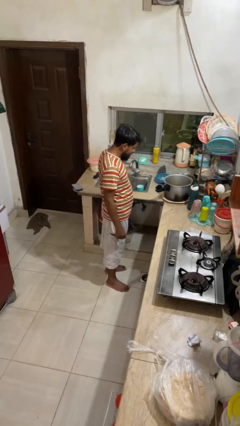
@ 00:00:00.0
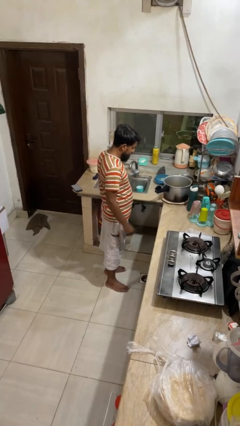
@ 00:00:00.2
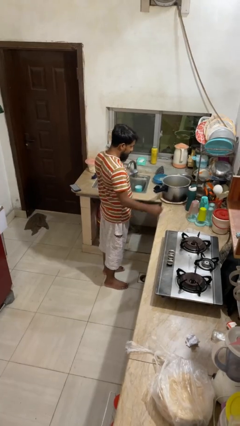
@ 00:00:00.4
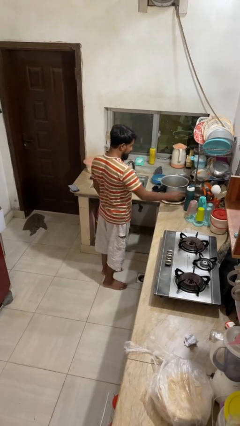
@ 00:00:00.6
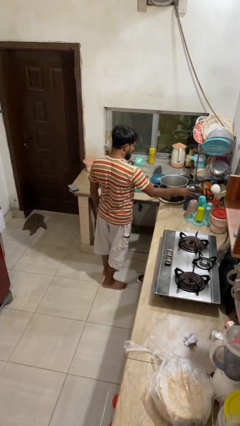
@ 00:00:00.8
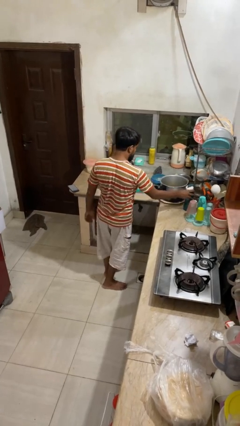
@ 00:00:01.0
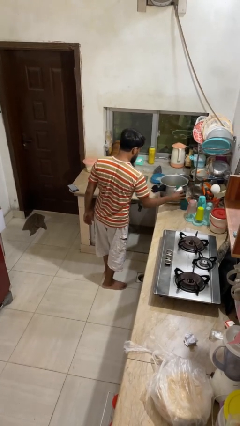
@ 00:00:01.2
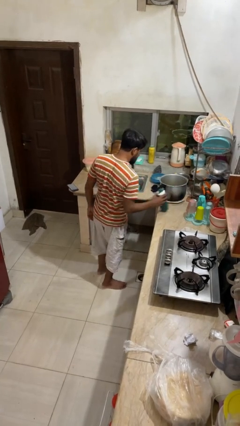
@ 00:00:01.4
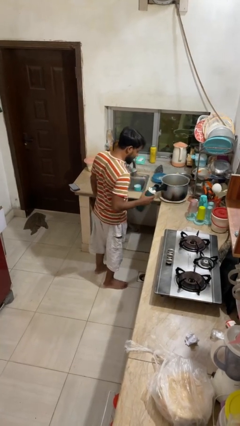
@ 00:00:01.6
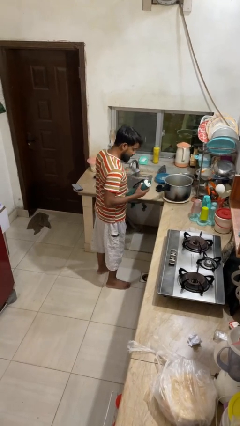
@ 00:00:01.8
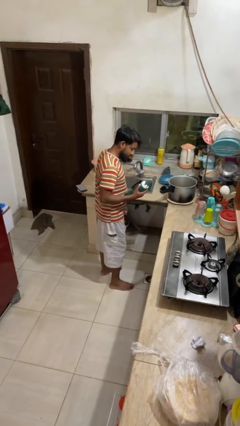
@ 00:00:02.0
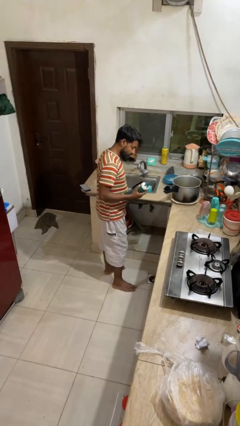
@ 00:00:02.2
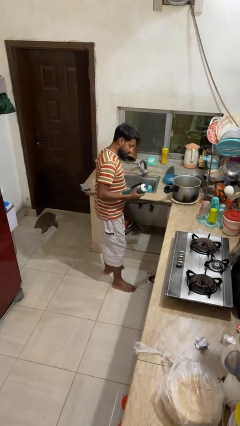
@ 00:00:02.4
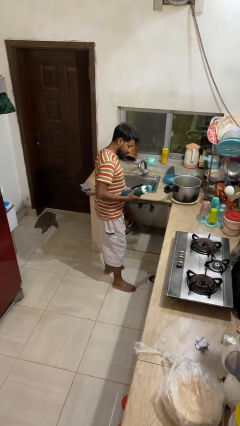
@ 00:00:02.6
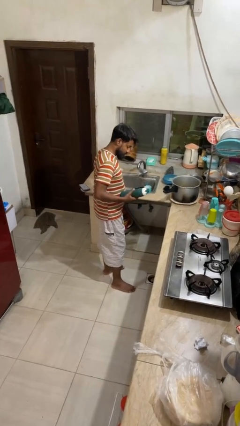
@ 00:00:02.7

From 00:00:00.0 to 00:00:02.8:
person picks up object from countertop

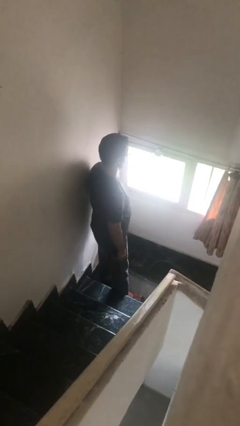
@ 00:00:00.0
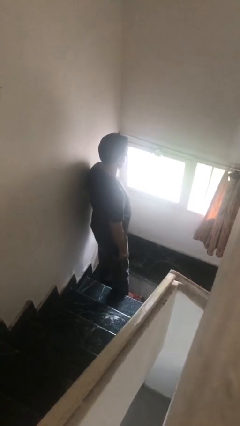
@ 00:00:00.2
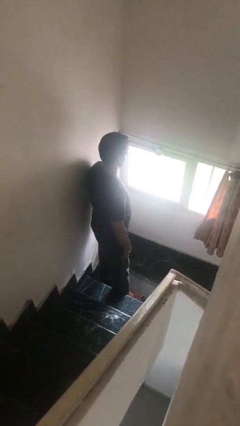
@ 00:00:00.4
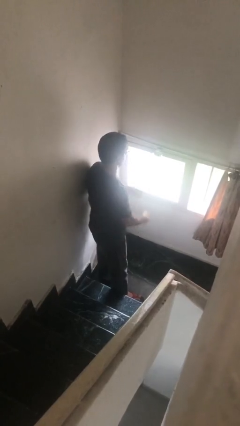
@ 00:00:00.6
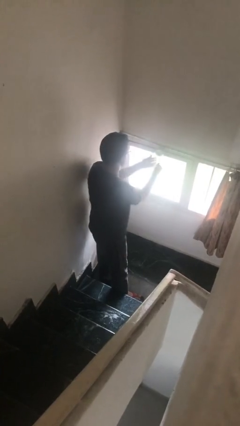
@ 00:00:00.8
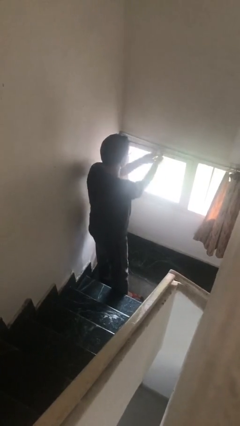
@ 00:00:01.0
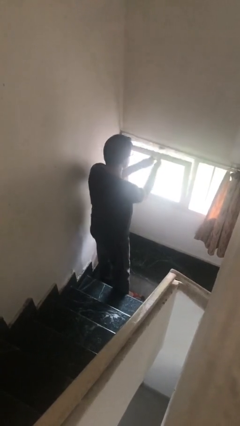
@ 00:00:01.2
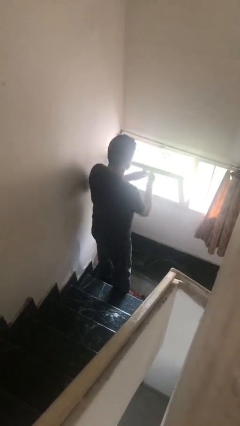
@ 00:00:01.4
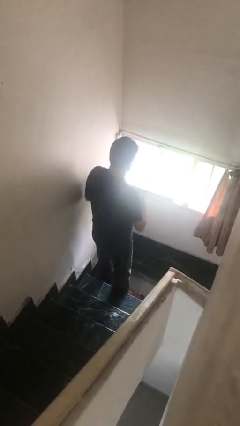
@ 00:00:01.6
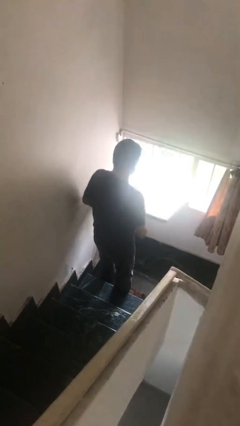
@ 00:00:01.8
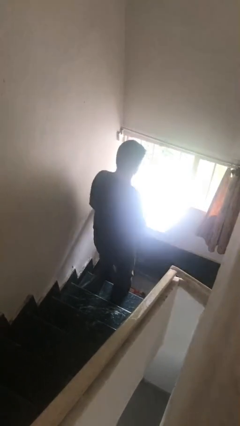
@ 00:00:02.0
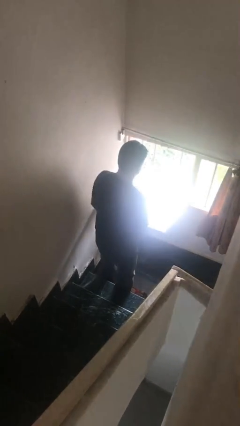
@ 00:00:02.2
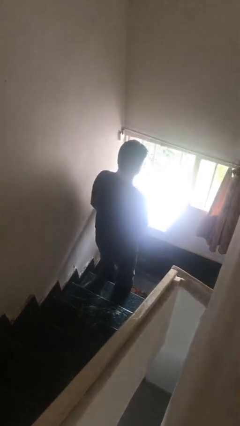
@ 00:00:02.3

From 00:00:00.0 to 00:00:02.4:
person opens home window

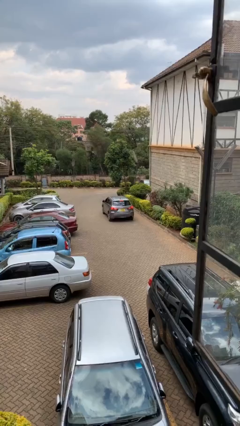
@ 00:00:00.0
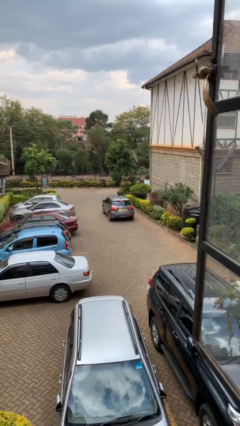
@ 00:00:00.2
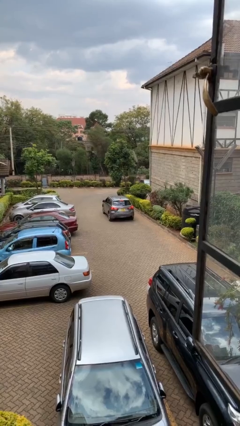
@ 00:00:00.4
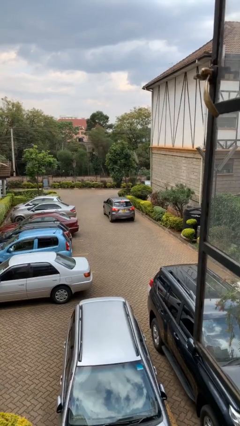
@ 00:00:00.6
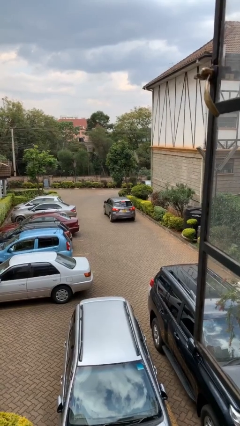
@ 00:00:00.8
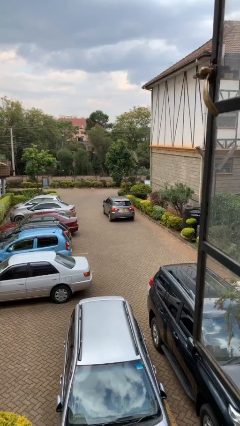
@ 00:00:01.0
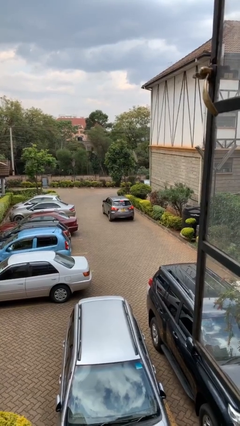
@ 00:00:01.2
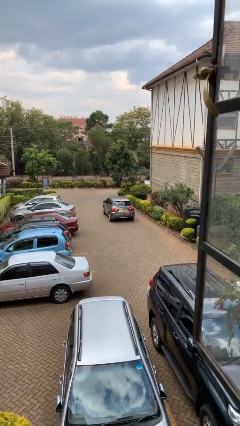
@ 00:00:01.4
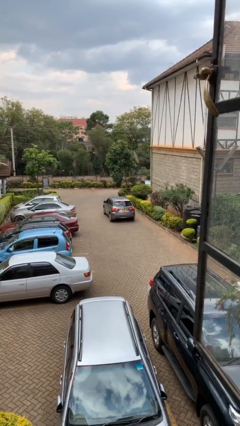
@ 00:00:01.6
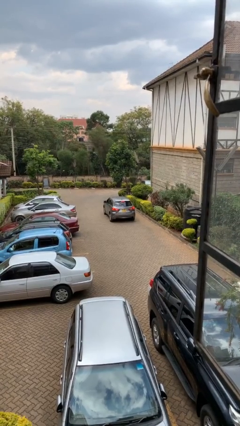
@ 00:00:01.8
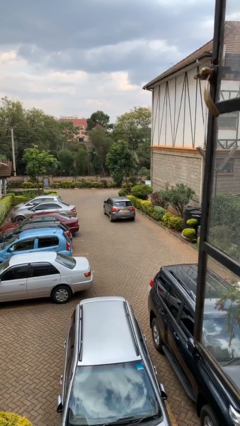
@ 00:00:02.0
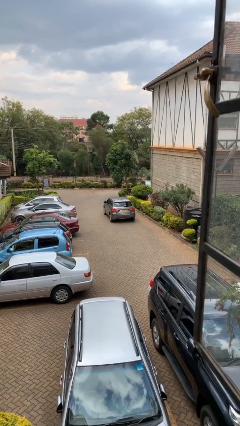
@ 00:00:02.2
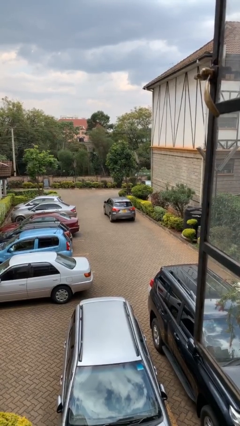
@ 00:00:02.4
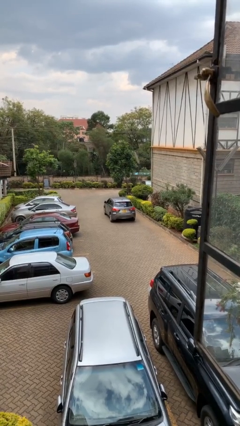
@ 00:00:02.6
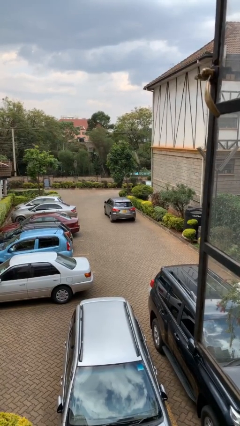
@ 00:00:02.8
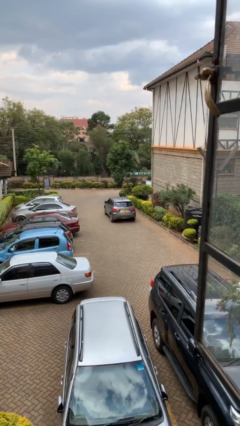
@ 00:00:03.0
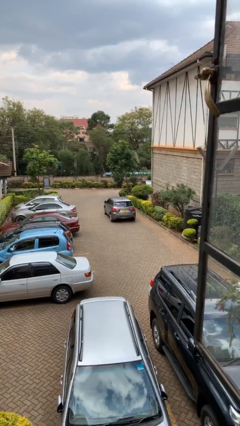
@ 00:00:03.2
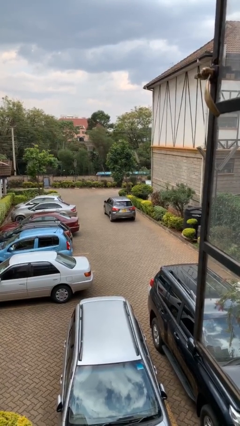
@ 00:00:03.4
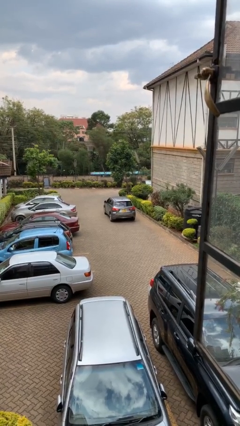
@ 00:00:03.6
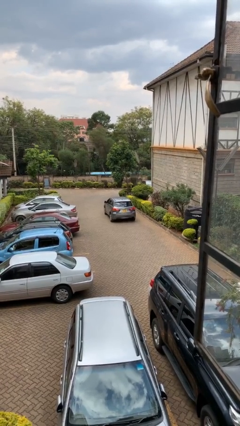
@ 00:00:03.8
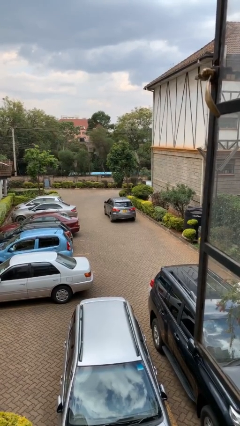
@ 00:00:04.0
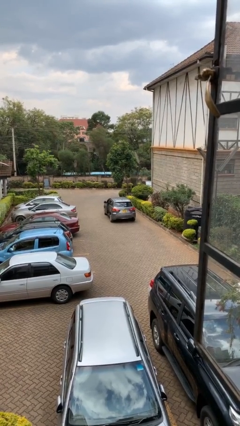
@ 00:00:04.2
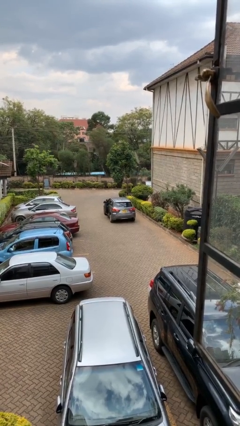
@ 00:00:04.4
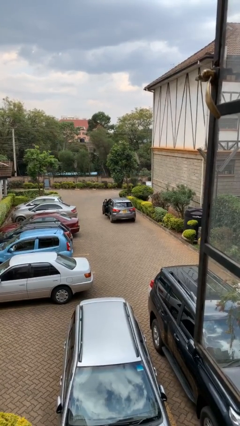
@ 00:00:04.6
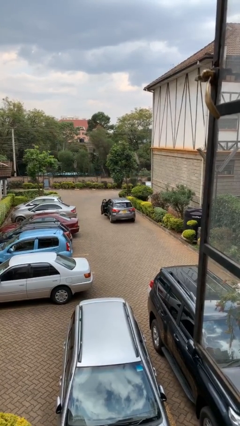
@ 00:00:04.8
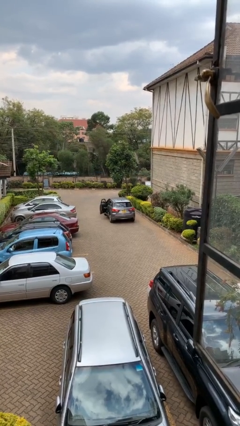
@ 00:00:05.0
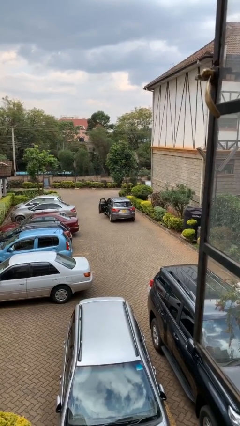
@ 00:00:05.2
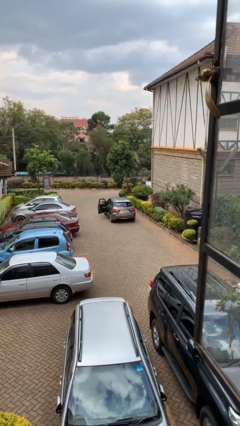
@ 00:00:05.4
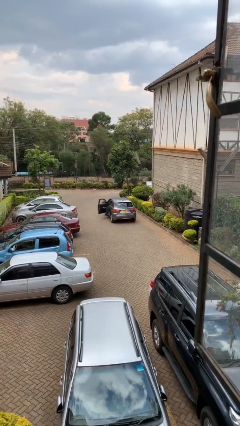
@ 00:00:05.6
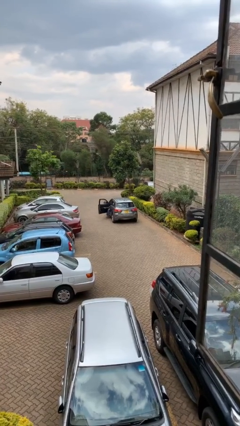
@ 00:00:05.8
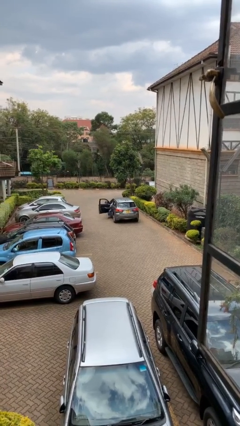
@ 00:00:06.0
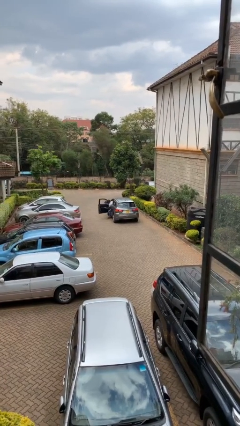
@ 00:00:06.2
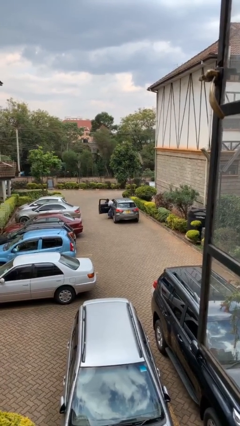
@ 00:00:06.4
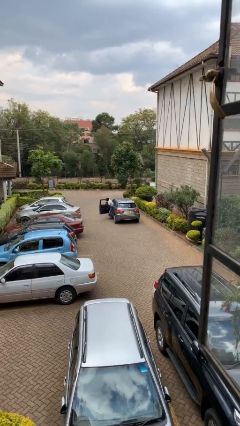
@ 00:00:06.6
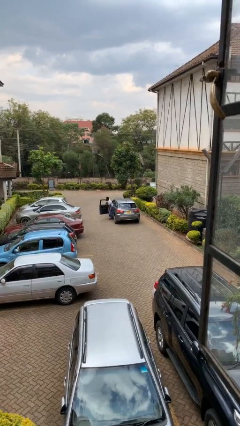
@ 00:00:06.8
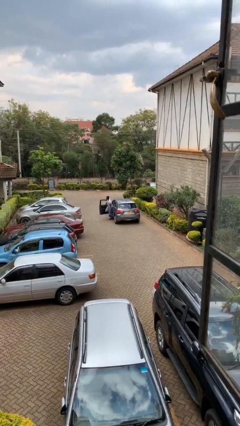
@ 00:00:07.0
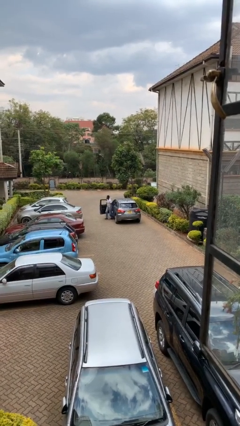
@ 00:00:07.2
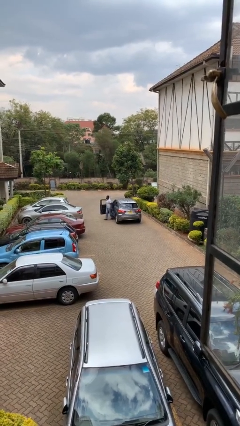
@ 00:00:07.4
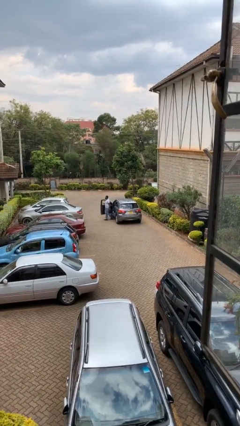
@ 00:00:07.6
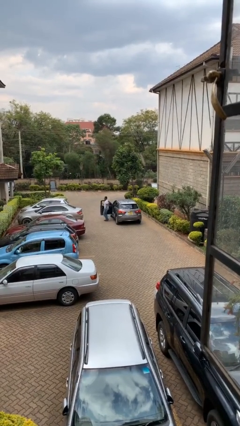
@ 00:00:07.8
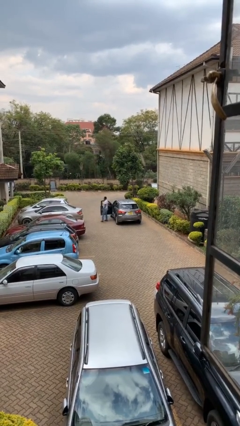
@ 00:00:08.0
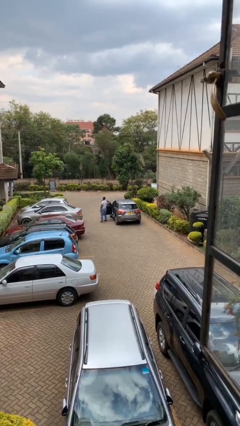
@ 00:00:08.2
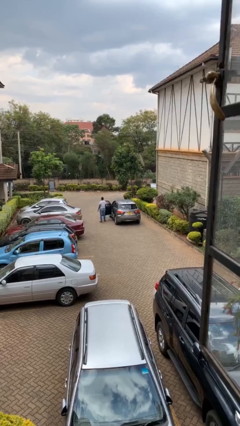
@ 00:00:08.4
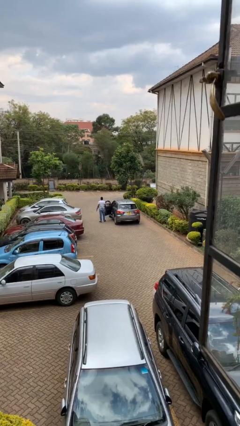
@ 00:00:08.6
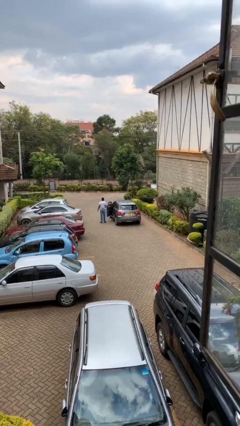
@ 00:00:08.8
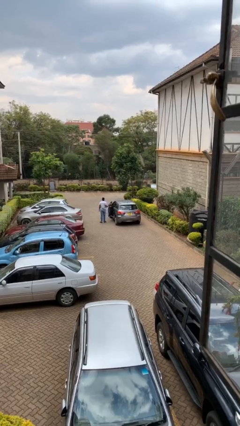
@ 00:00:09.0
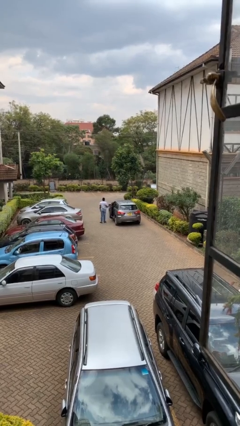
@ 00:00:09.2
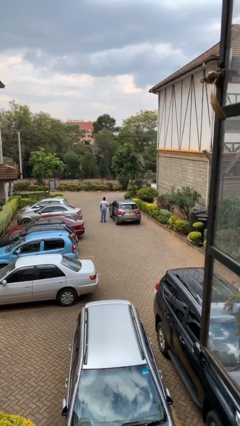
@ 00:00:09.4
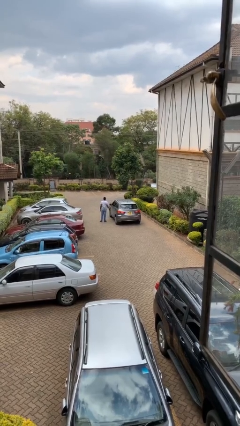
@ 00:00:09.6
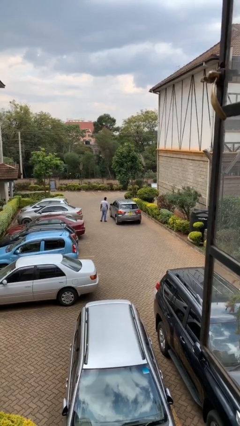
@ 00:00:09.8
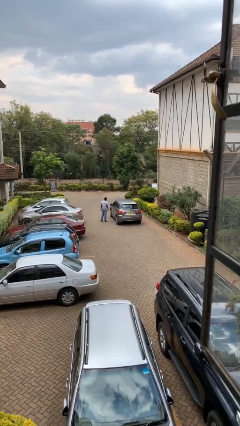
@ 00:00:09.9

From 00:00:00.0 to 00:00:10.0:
car drops off person

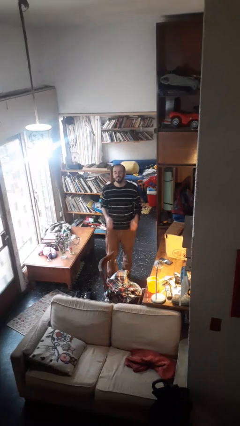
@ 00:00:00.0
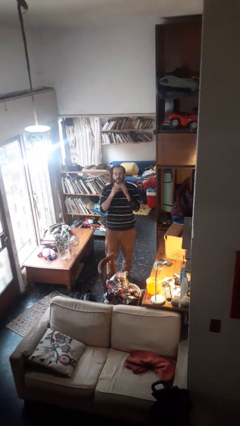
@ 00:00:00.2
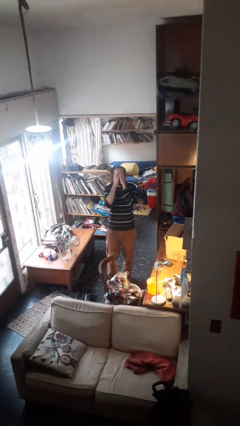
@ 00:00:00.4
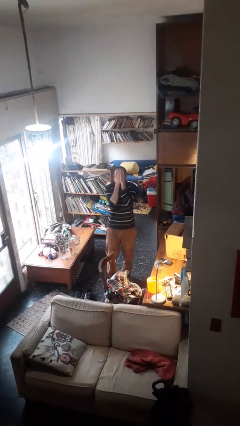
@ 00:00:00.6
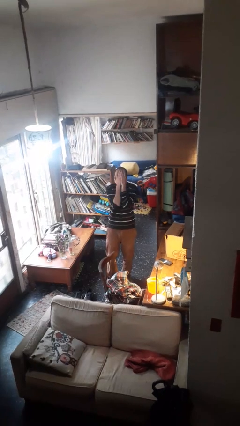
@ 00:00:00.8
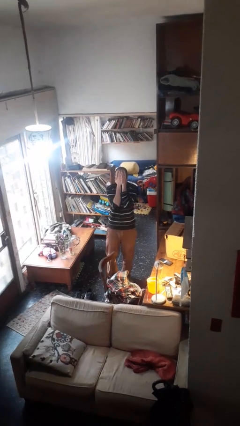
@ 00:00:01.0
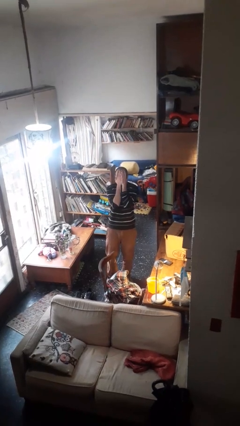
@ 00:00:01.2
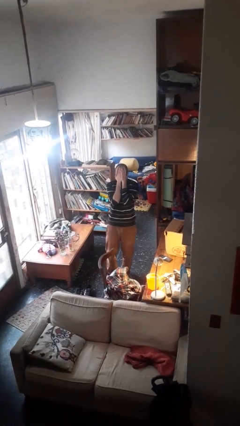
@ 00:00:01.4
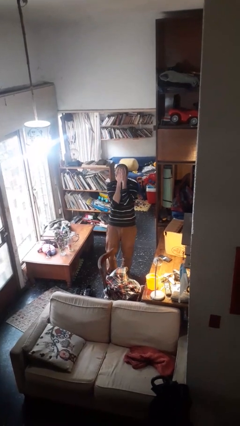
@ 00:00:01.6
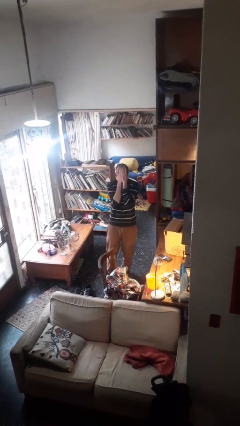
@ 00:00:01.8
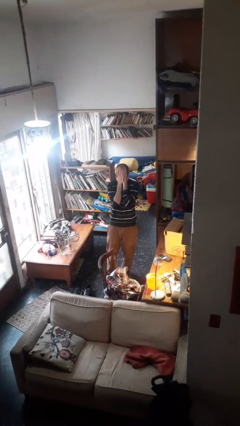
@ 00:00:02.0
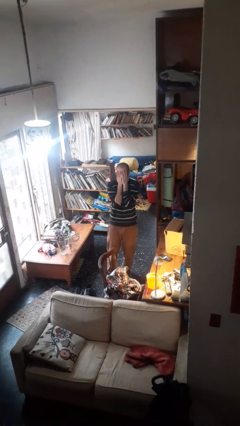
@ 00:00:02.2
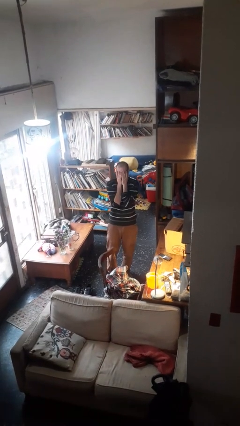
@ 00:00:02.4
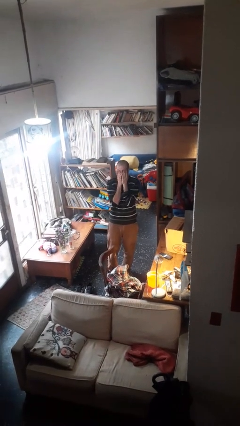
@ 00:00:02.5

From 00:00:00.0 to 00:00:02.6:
person covers face with hands
